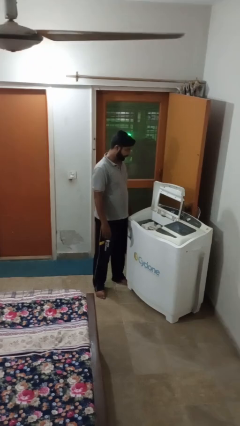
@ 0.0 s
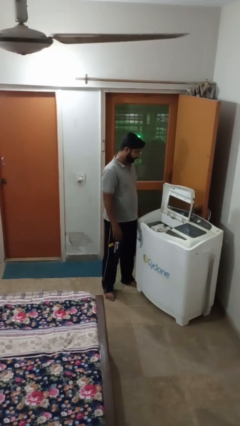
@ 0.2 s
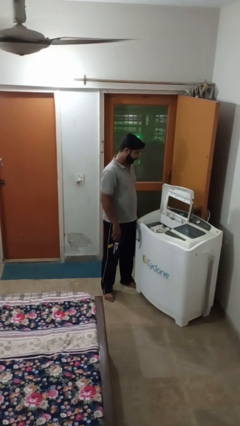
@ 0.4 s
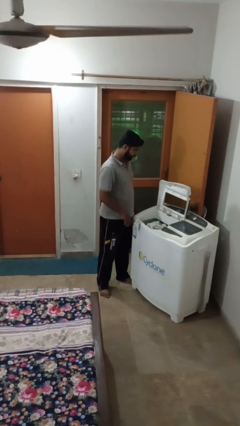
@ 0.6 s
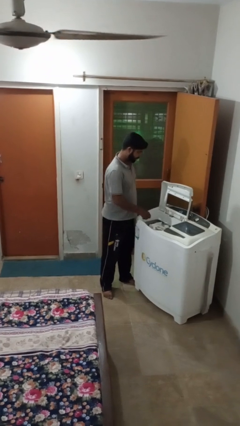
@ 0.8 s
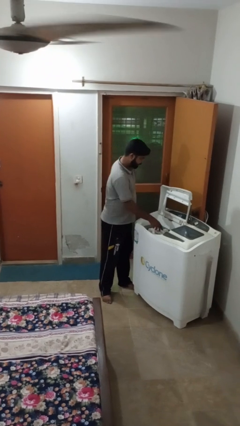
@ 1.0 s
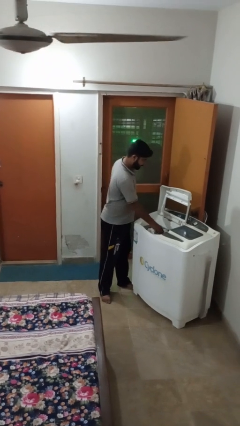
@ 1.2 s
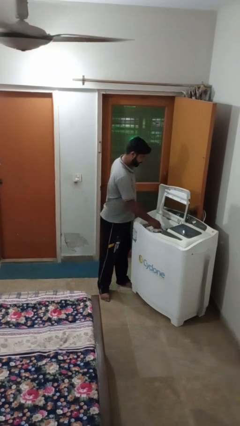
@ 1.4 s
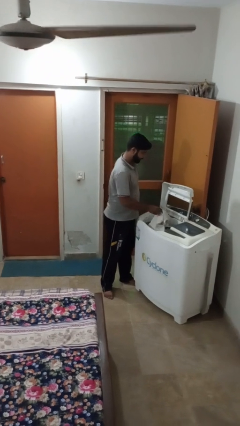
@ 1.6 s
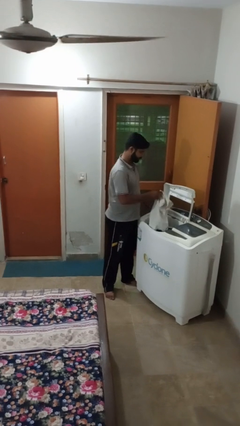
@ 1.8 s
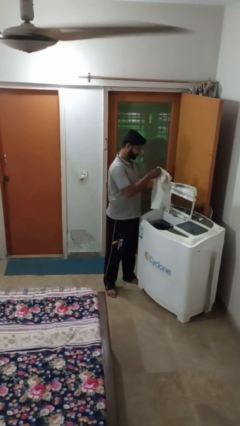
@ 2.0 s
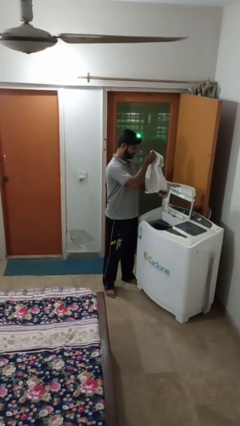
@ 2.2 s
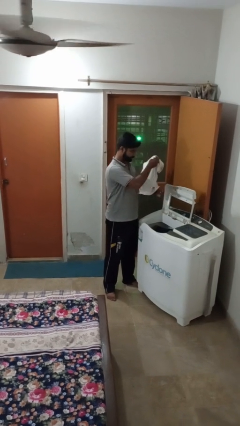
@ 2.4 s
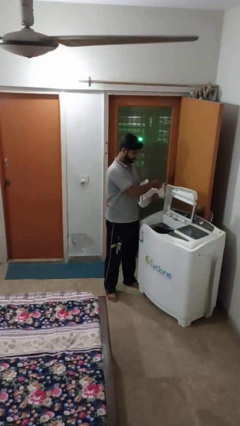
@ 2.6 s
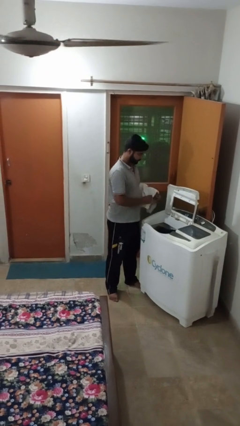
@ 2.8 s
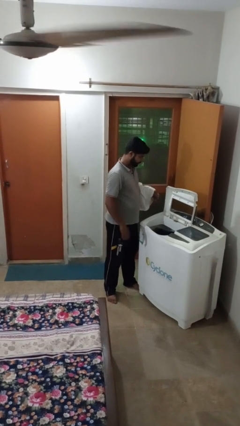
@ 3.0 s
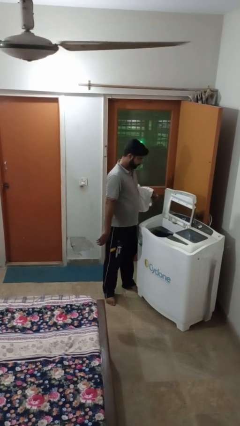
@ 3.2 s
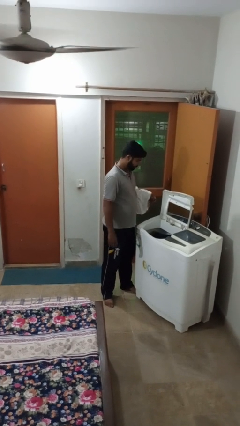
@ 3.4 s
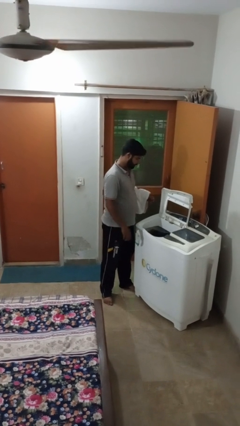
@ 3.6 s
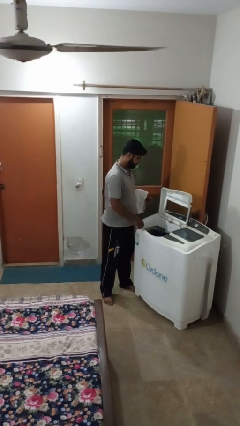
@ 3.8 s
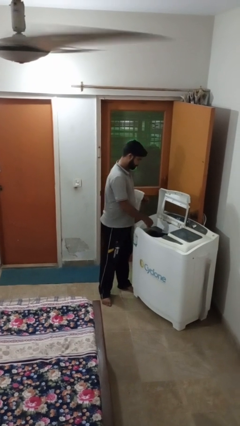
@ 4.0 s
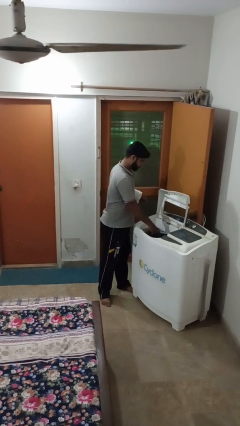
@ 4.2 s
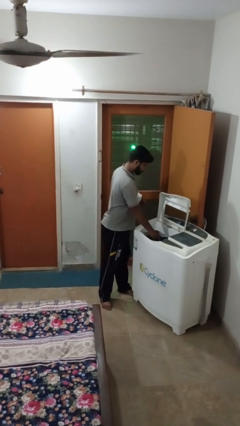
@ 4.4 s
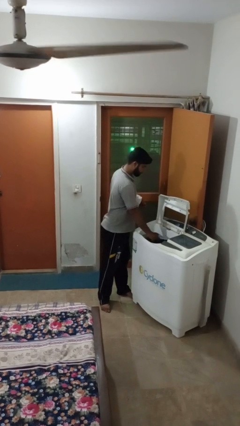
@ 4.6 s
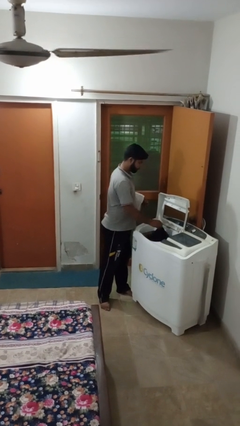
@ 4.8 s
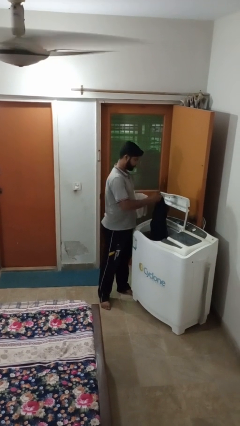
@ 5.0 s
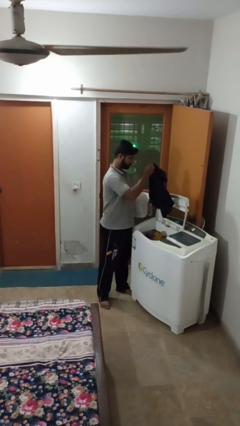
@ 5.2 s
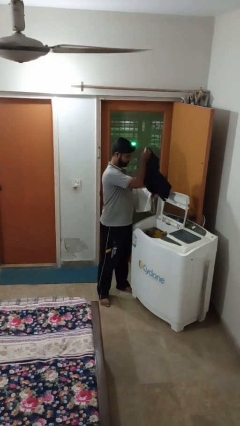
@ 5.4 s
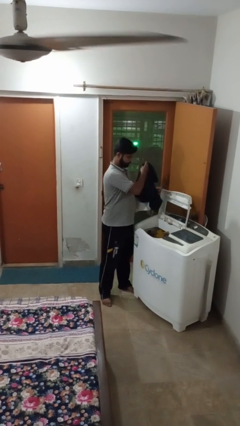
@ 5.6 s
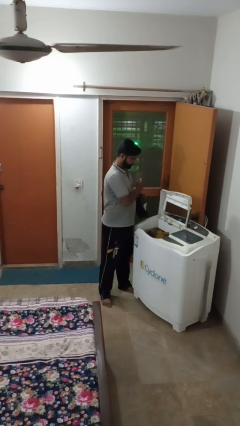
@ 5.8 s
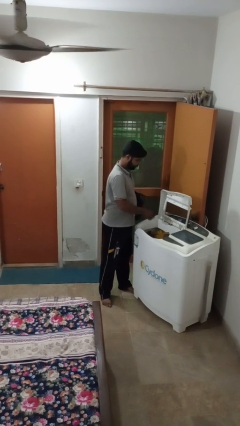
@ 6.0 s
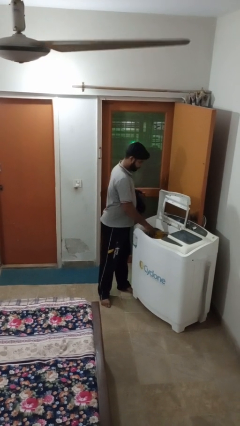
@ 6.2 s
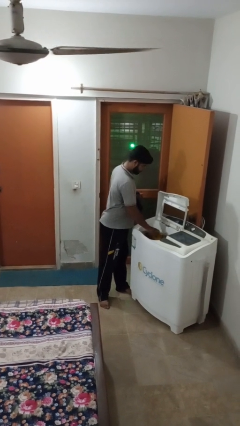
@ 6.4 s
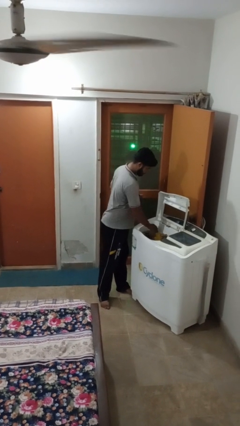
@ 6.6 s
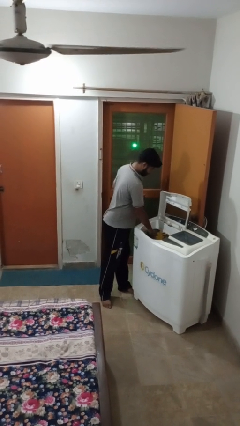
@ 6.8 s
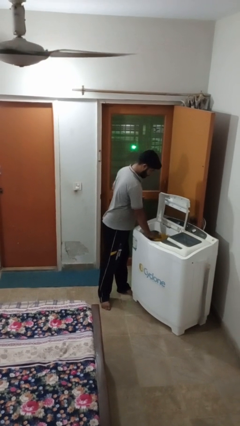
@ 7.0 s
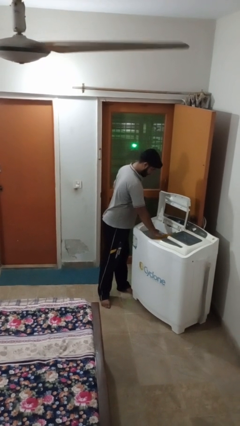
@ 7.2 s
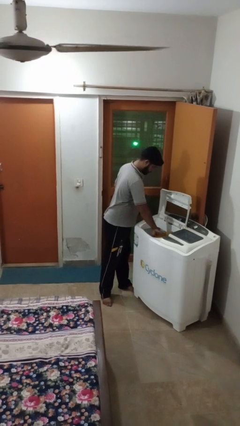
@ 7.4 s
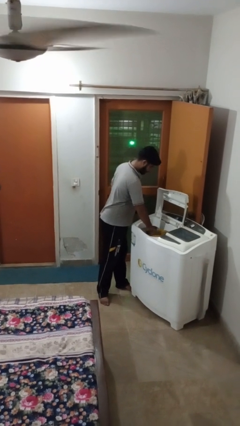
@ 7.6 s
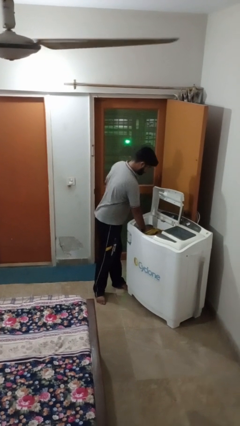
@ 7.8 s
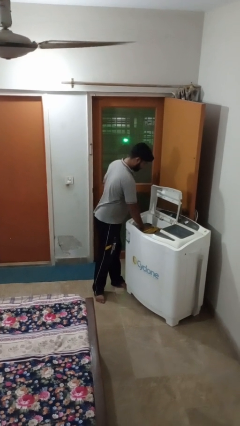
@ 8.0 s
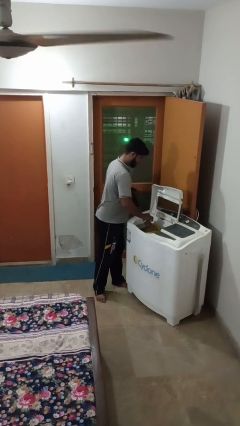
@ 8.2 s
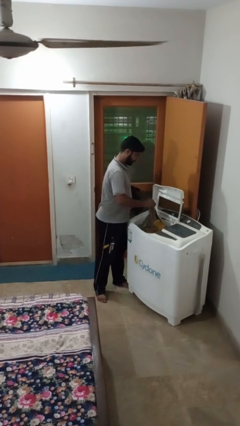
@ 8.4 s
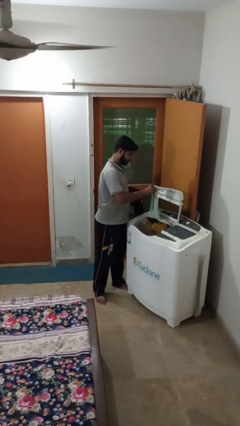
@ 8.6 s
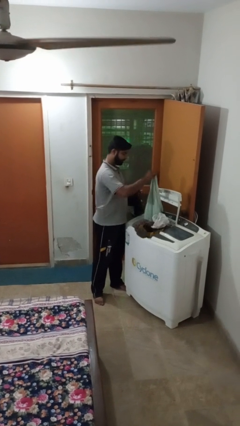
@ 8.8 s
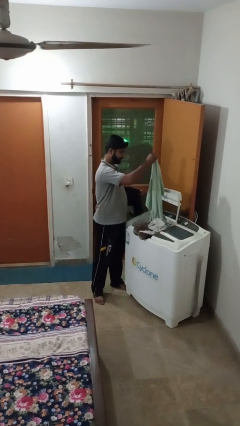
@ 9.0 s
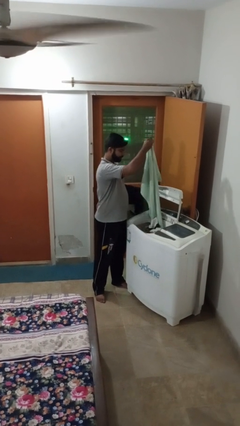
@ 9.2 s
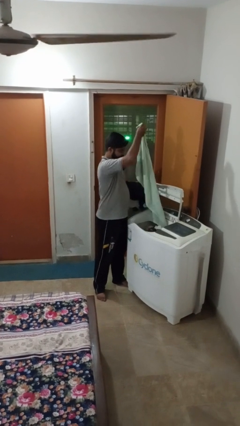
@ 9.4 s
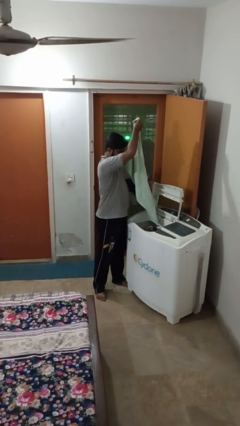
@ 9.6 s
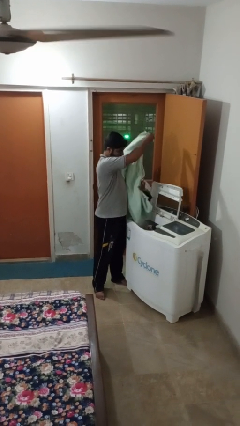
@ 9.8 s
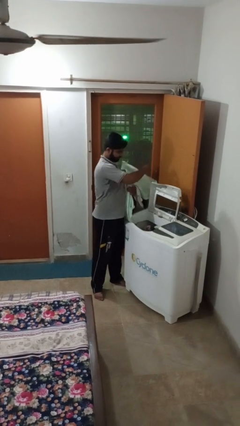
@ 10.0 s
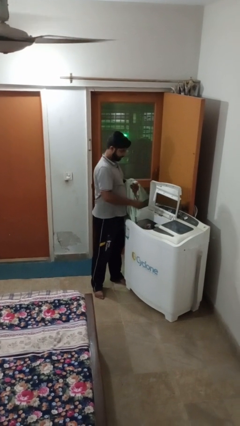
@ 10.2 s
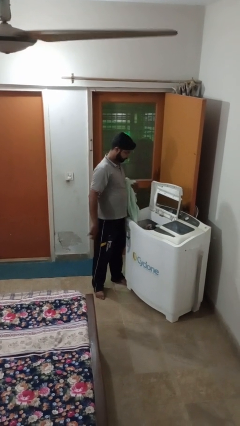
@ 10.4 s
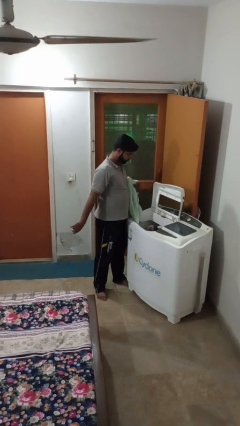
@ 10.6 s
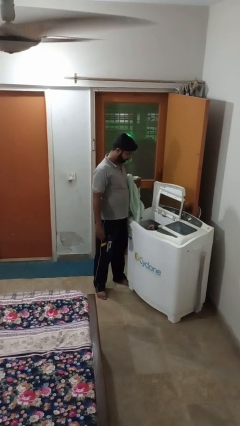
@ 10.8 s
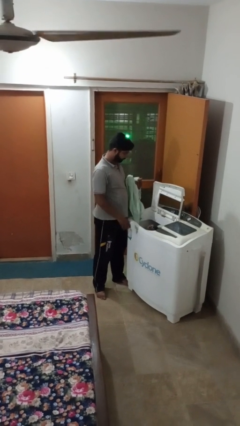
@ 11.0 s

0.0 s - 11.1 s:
person unloads clotheswasher

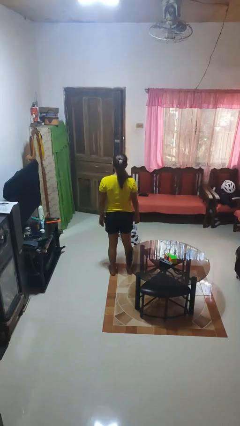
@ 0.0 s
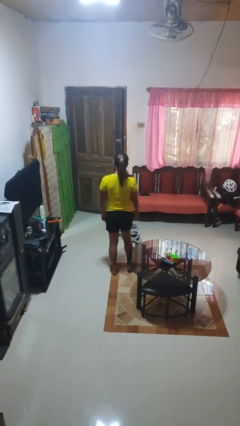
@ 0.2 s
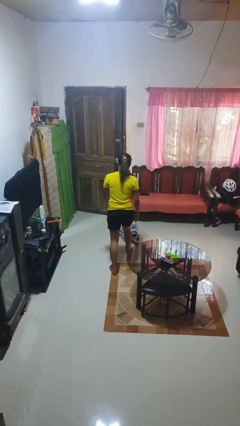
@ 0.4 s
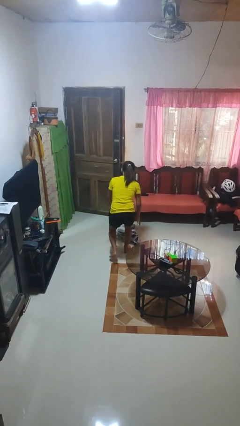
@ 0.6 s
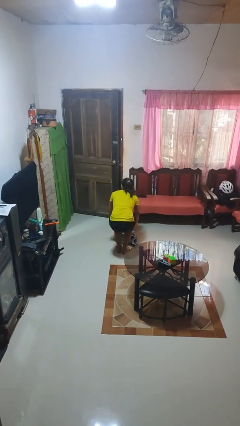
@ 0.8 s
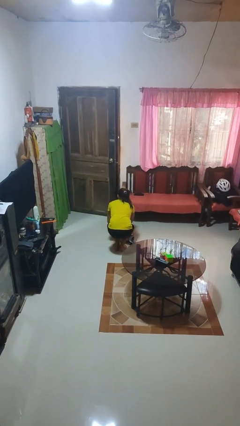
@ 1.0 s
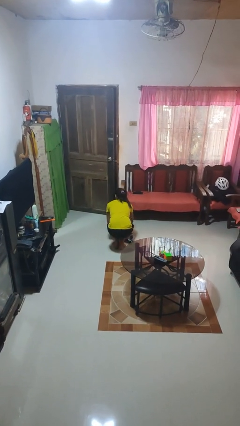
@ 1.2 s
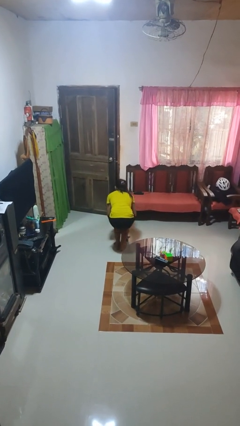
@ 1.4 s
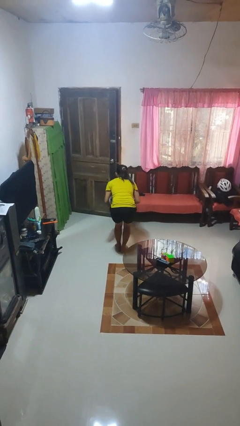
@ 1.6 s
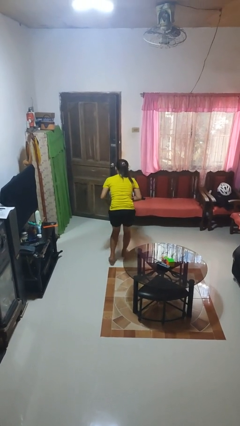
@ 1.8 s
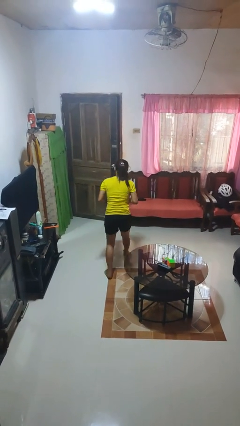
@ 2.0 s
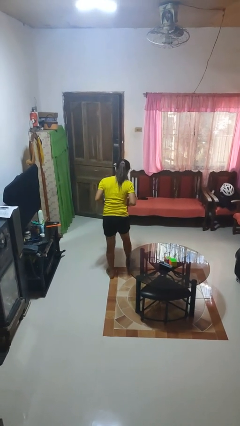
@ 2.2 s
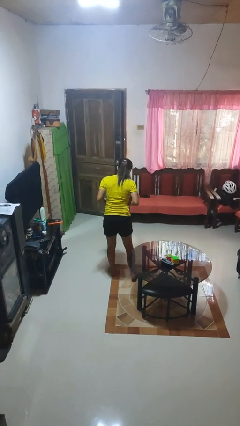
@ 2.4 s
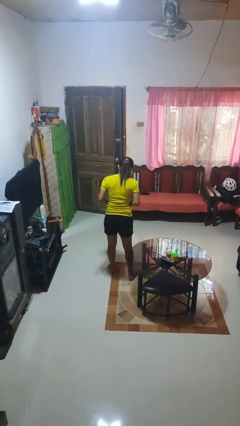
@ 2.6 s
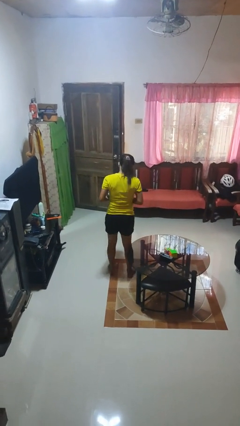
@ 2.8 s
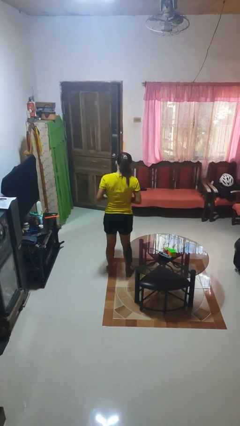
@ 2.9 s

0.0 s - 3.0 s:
person picks up object from floor

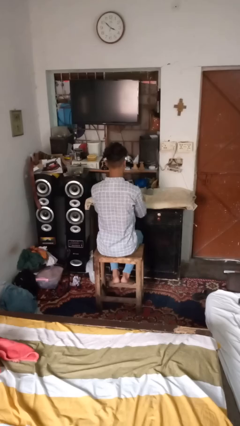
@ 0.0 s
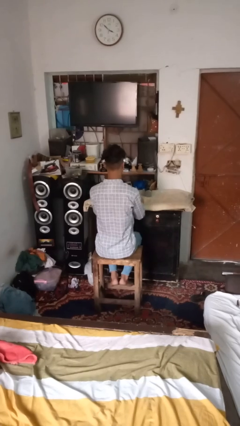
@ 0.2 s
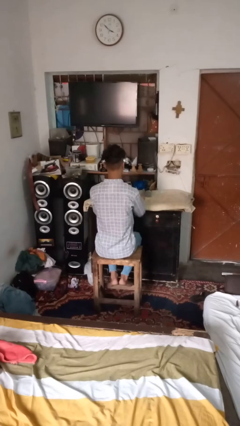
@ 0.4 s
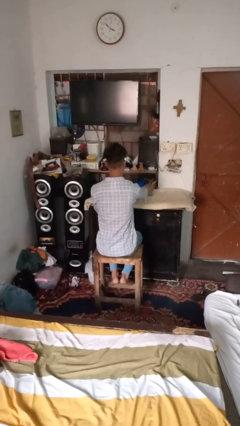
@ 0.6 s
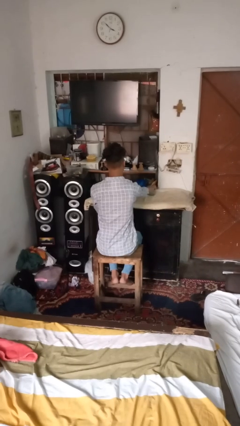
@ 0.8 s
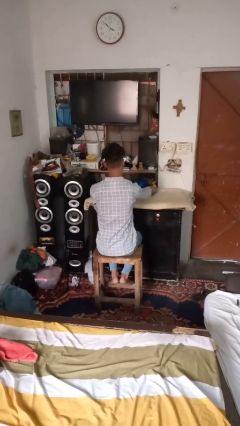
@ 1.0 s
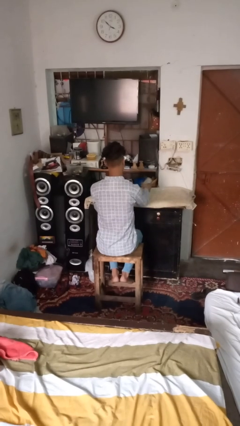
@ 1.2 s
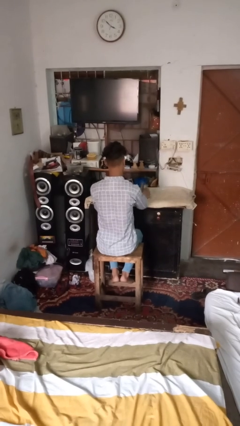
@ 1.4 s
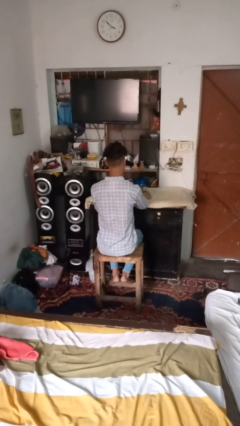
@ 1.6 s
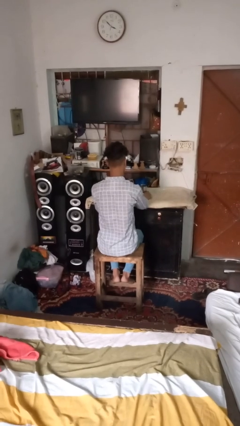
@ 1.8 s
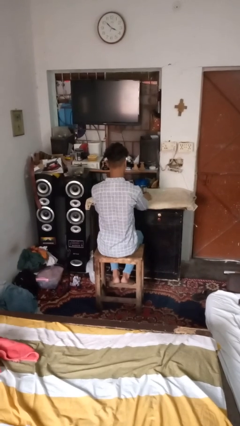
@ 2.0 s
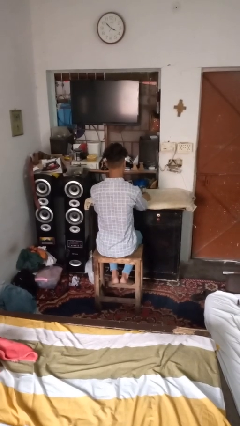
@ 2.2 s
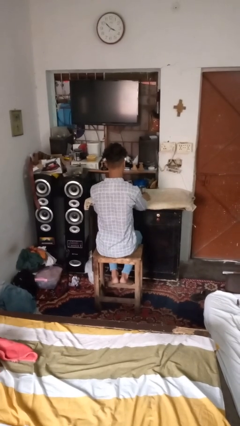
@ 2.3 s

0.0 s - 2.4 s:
person sets upright glass

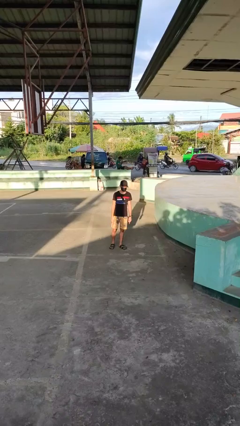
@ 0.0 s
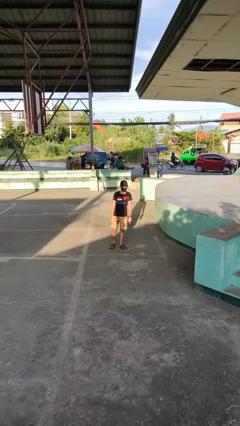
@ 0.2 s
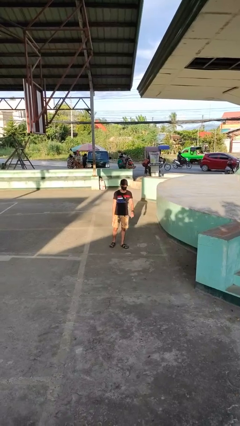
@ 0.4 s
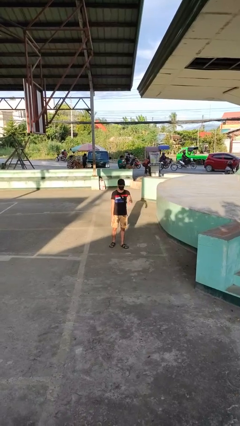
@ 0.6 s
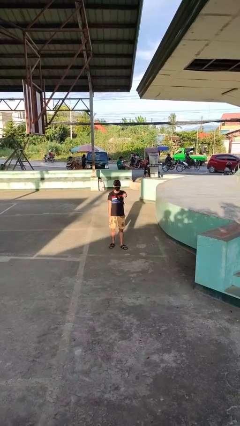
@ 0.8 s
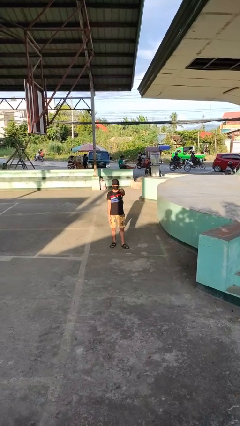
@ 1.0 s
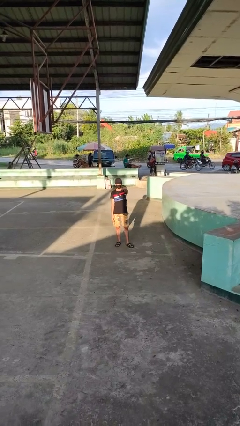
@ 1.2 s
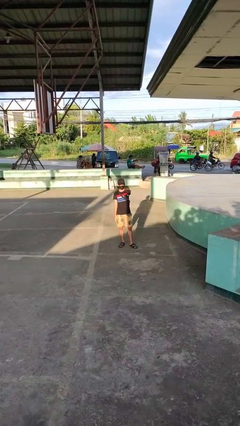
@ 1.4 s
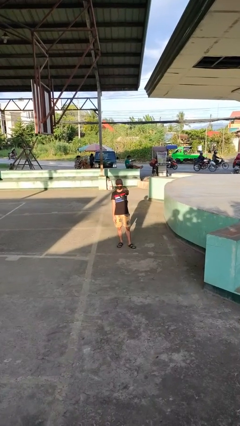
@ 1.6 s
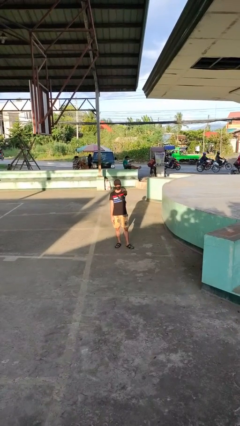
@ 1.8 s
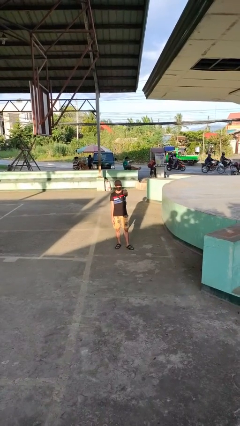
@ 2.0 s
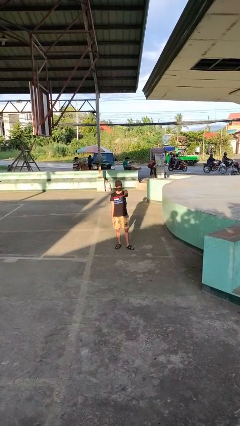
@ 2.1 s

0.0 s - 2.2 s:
person points at person
